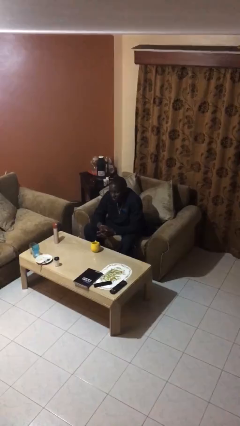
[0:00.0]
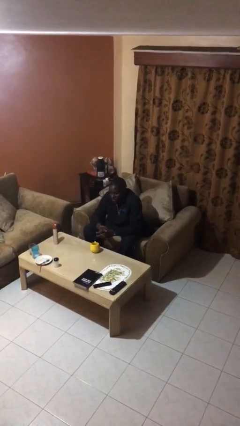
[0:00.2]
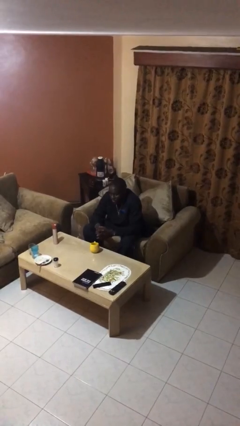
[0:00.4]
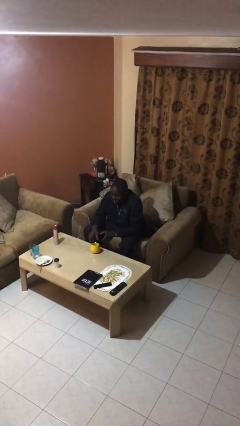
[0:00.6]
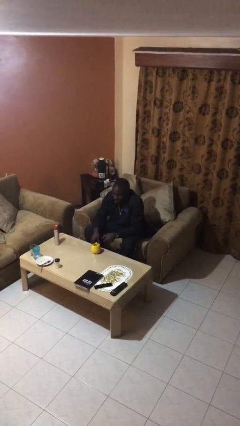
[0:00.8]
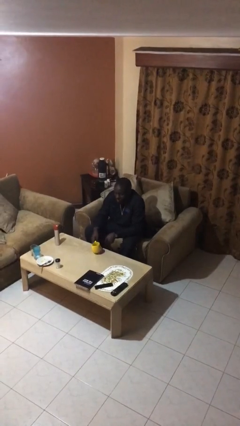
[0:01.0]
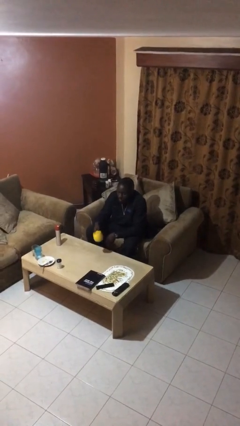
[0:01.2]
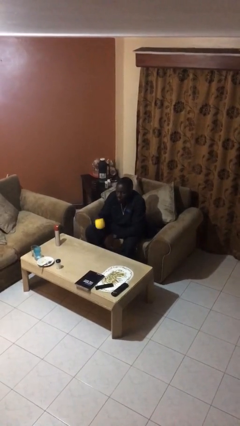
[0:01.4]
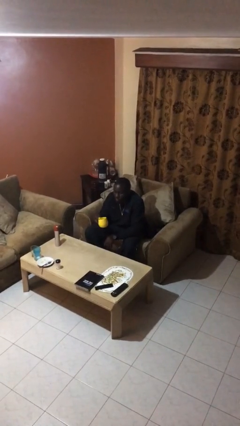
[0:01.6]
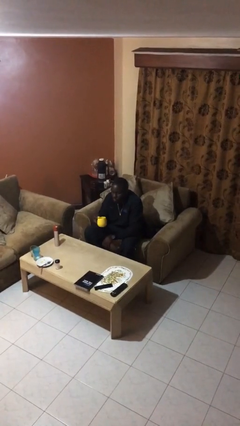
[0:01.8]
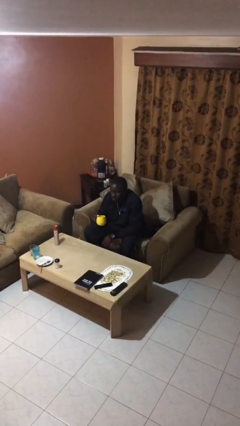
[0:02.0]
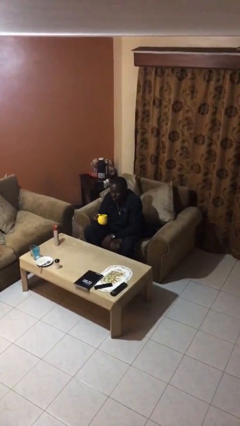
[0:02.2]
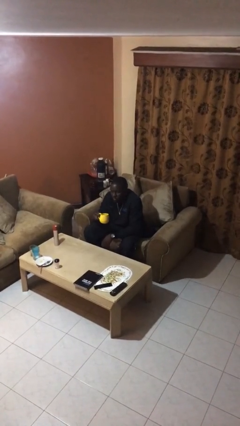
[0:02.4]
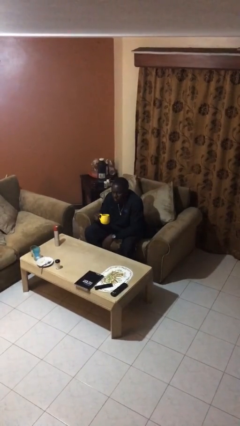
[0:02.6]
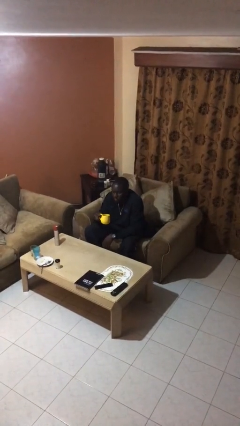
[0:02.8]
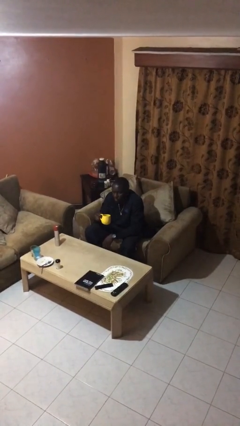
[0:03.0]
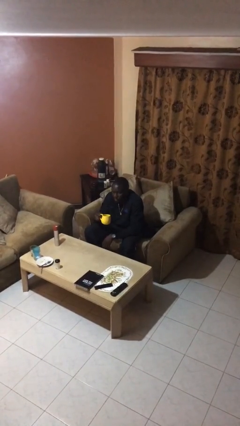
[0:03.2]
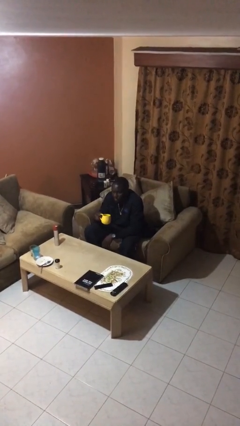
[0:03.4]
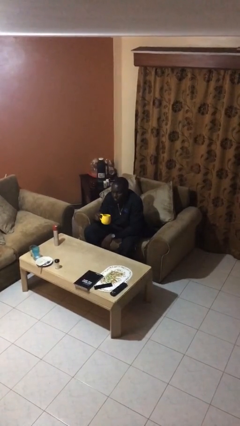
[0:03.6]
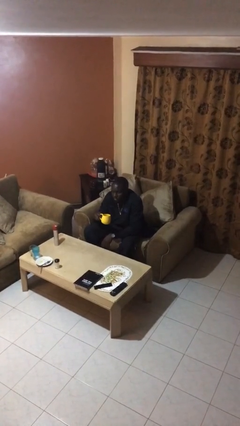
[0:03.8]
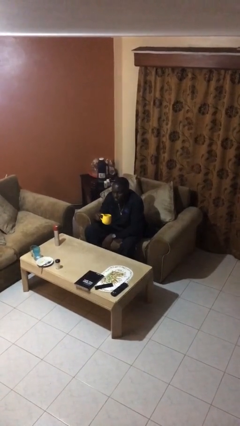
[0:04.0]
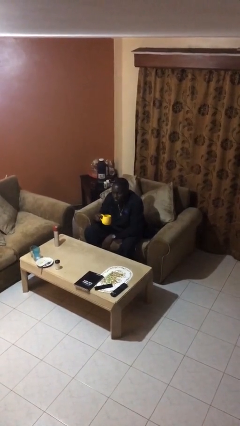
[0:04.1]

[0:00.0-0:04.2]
person picks up object from table

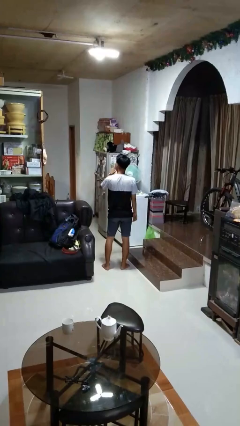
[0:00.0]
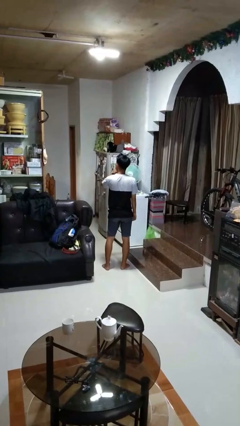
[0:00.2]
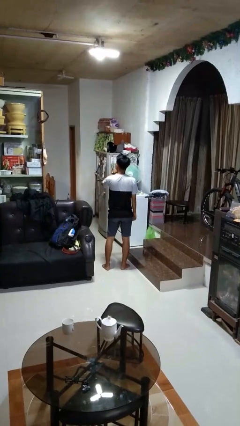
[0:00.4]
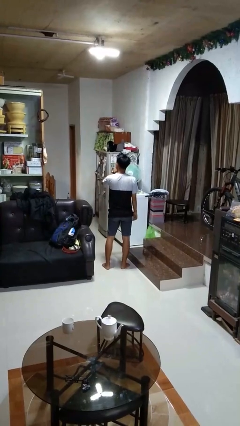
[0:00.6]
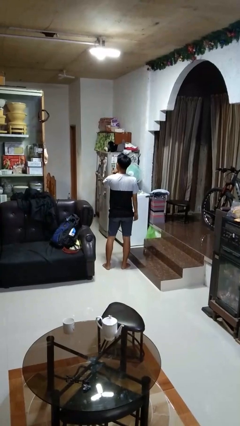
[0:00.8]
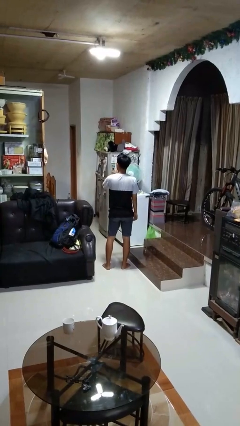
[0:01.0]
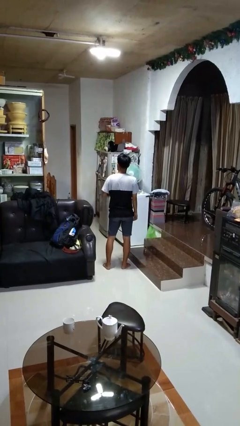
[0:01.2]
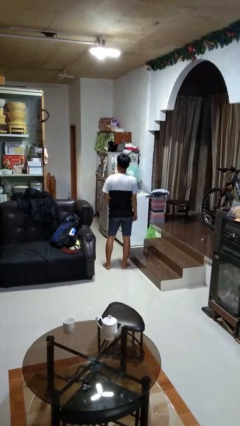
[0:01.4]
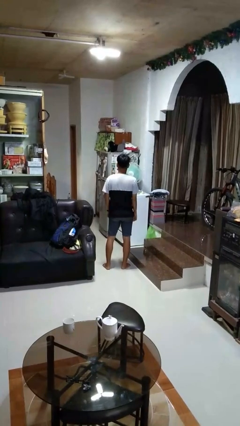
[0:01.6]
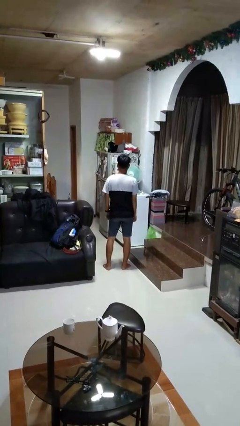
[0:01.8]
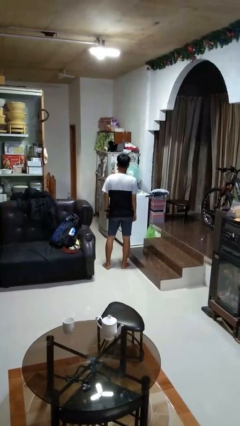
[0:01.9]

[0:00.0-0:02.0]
person gestures be quiet

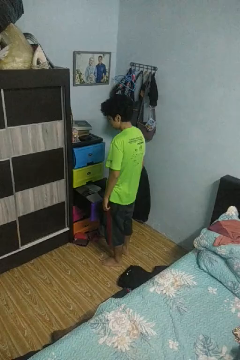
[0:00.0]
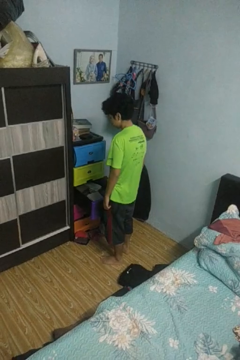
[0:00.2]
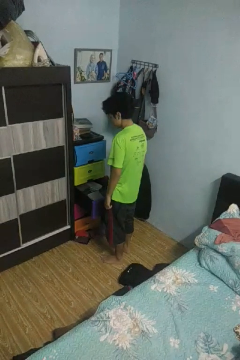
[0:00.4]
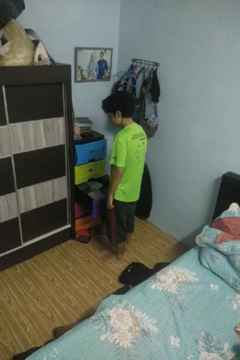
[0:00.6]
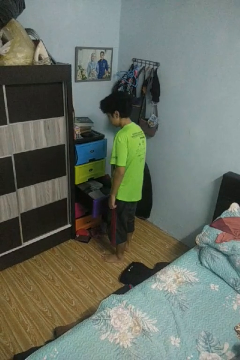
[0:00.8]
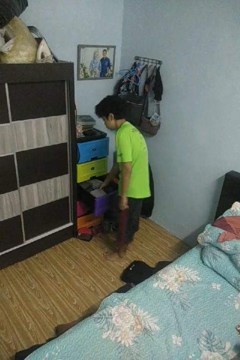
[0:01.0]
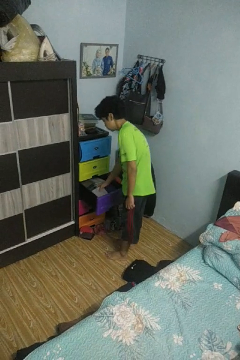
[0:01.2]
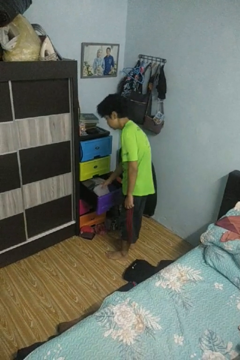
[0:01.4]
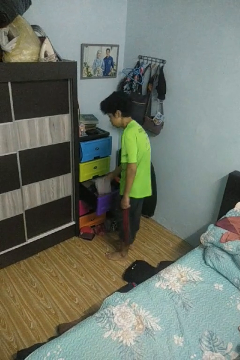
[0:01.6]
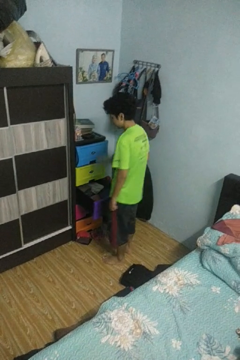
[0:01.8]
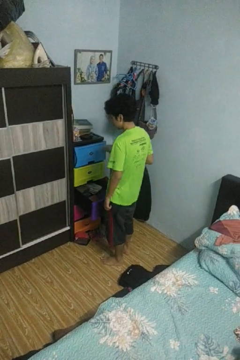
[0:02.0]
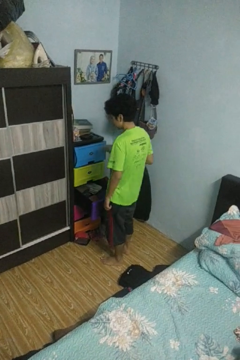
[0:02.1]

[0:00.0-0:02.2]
person takes clothes from dresser

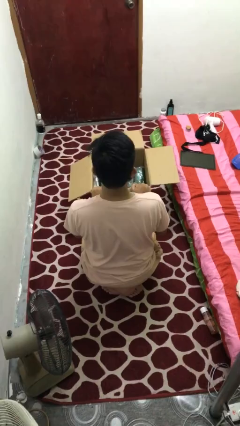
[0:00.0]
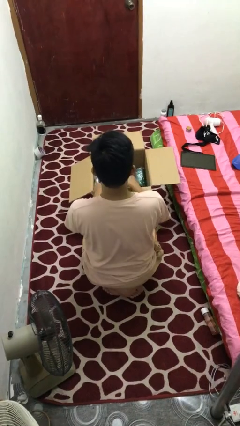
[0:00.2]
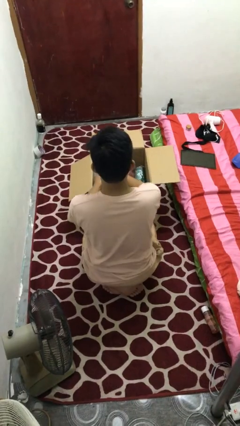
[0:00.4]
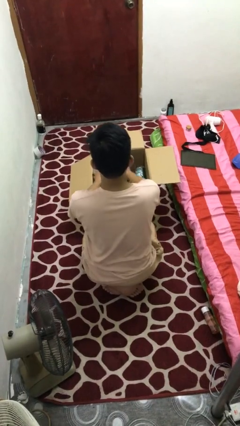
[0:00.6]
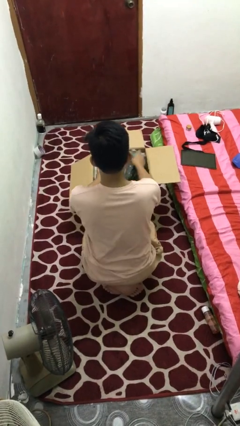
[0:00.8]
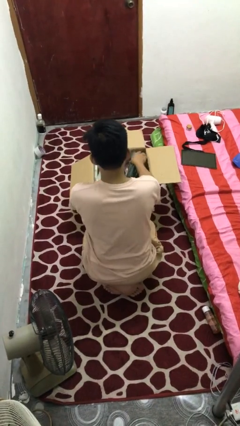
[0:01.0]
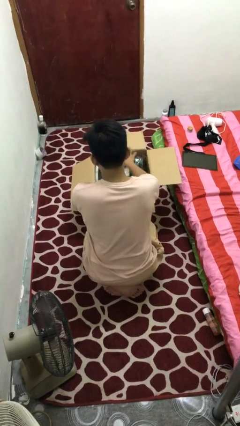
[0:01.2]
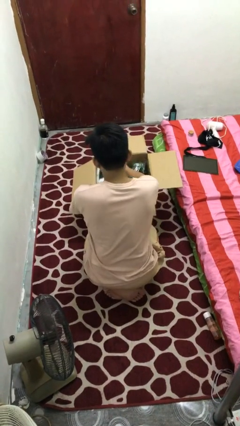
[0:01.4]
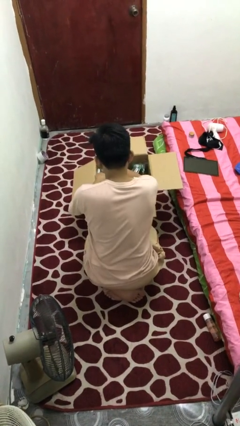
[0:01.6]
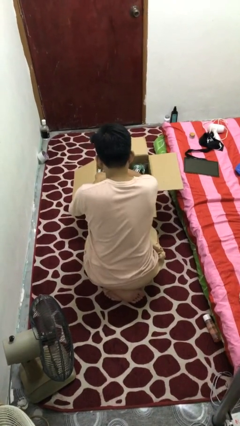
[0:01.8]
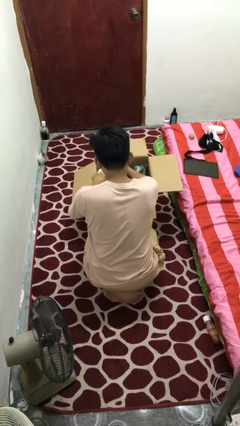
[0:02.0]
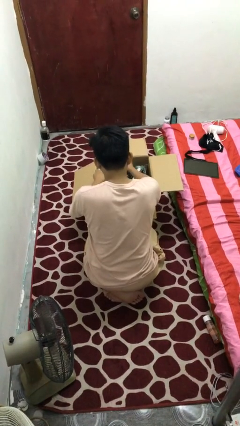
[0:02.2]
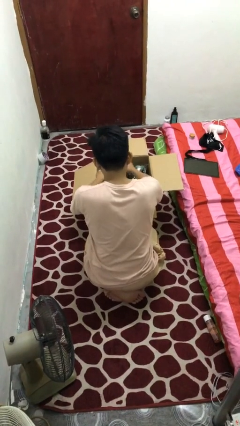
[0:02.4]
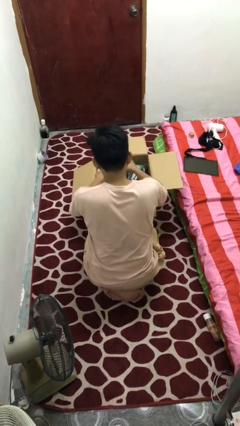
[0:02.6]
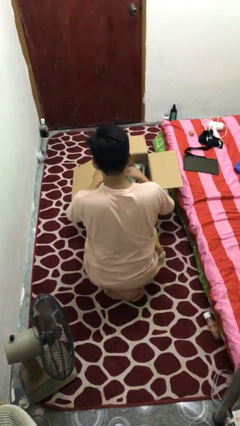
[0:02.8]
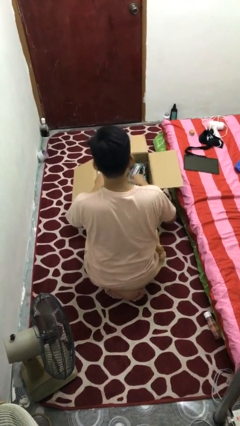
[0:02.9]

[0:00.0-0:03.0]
person searches in box

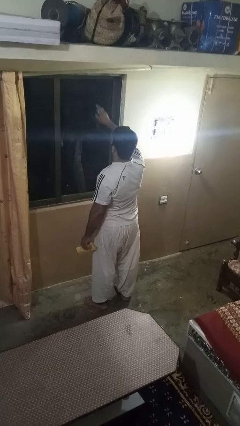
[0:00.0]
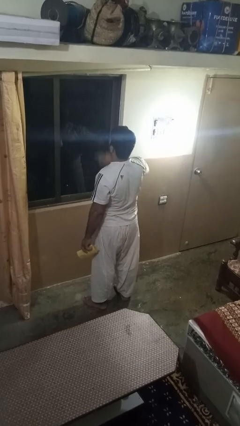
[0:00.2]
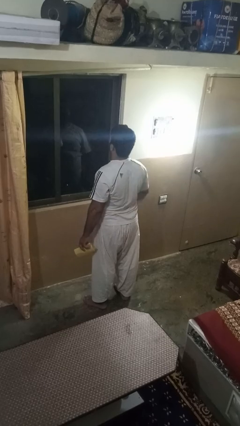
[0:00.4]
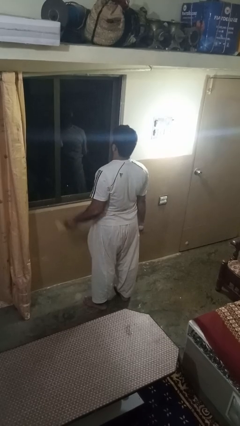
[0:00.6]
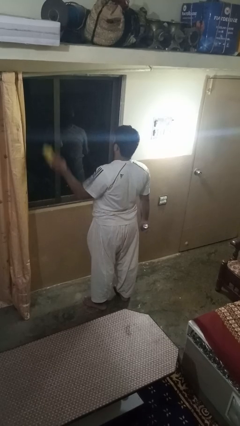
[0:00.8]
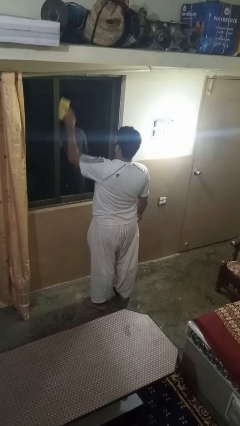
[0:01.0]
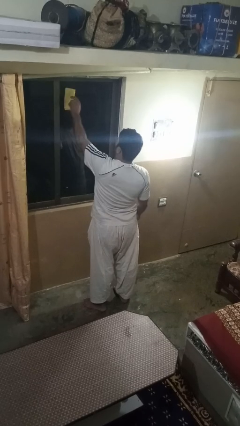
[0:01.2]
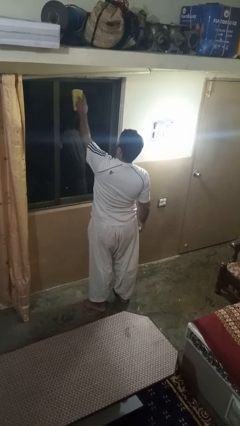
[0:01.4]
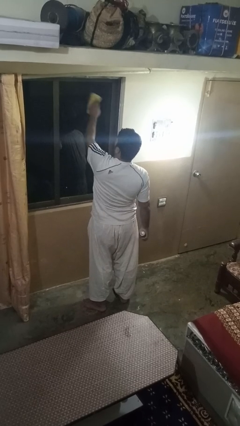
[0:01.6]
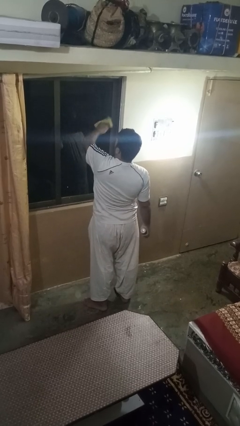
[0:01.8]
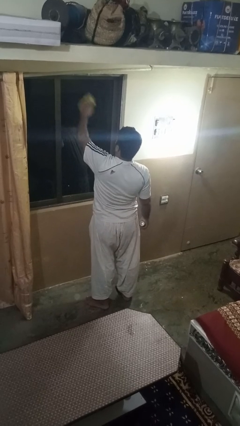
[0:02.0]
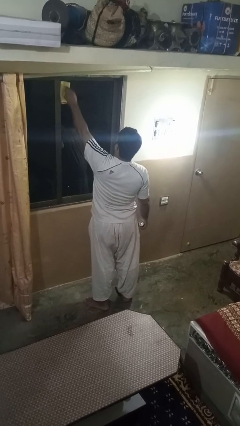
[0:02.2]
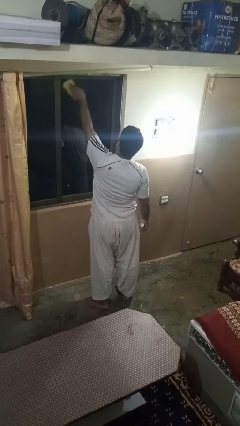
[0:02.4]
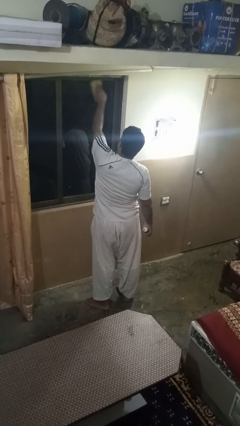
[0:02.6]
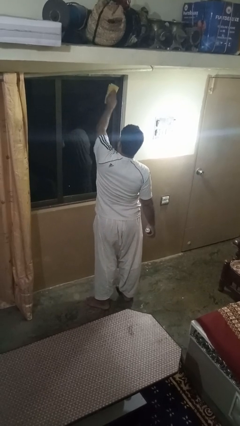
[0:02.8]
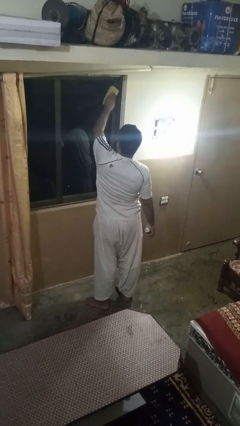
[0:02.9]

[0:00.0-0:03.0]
person washes window

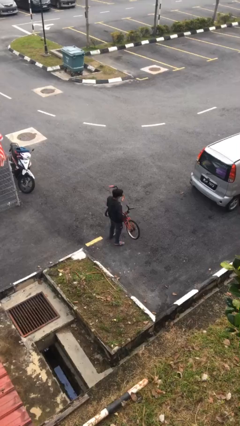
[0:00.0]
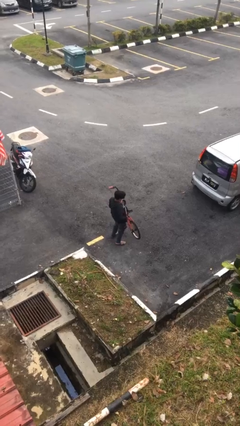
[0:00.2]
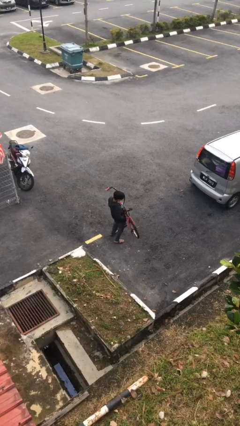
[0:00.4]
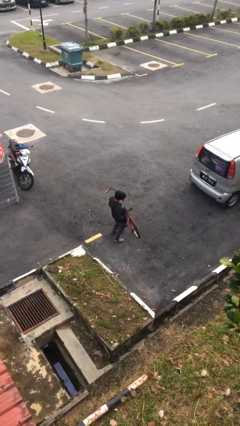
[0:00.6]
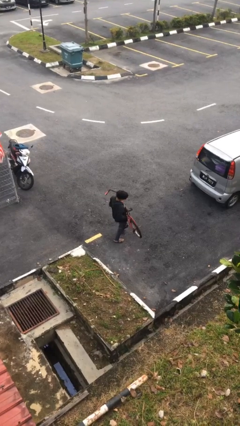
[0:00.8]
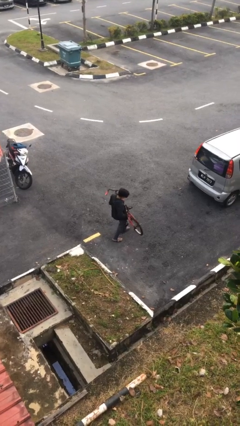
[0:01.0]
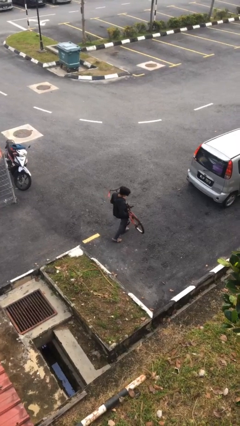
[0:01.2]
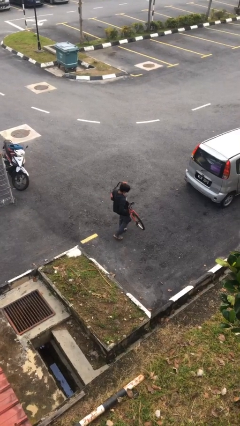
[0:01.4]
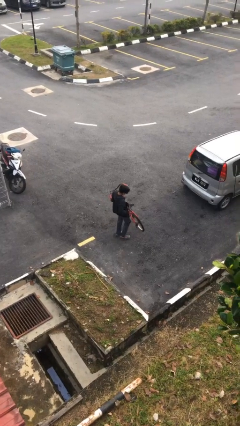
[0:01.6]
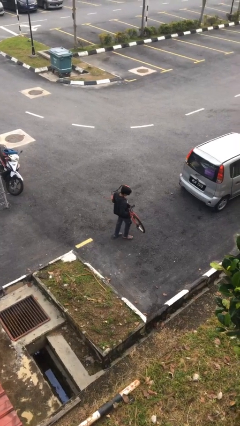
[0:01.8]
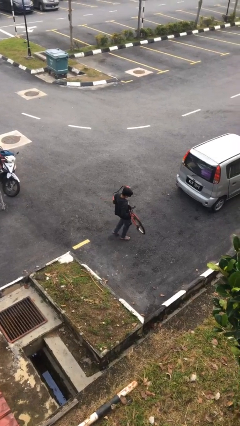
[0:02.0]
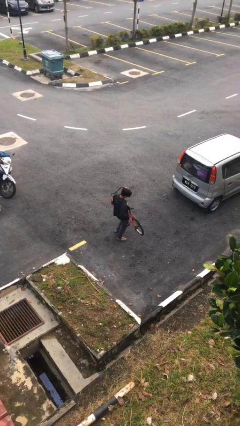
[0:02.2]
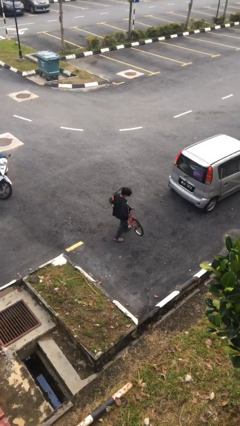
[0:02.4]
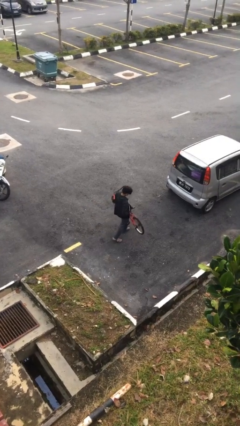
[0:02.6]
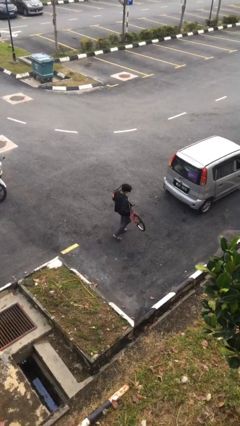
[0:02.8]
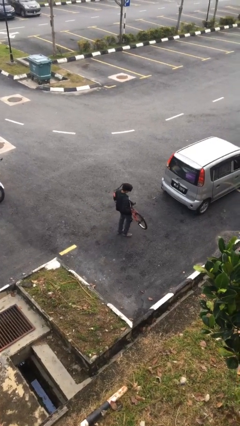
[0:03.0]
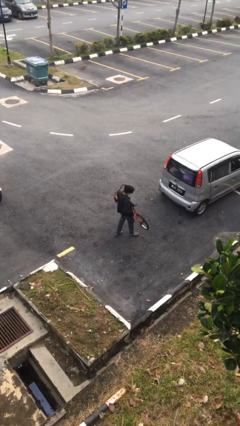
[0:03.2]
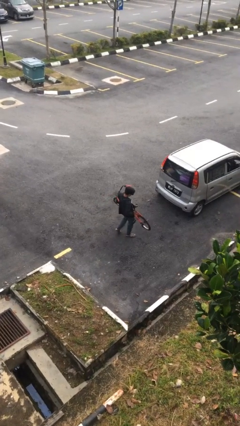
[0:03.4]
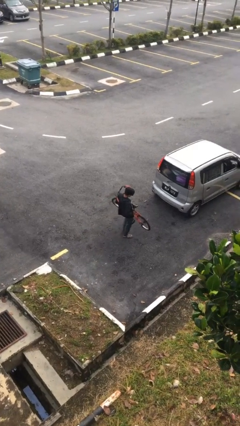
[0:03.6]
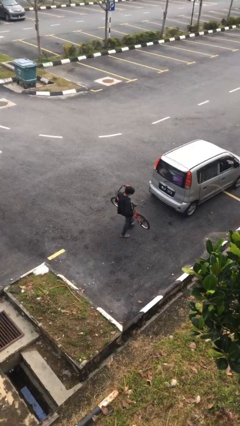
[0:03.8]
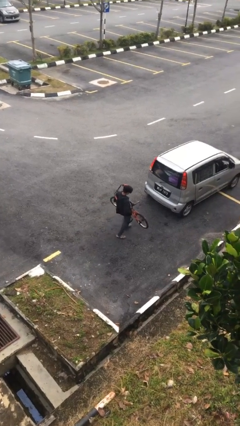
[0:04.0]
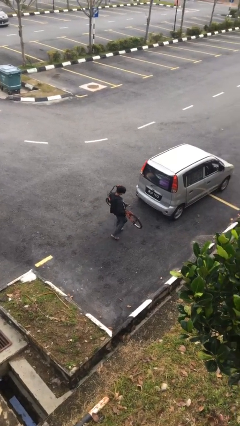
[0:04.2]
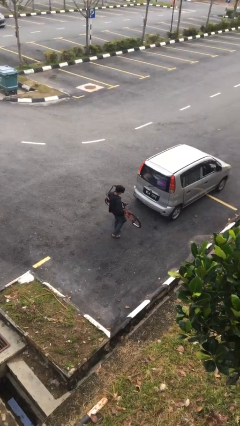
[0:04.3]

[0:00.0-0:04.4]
person carries heavy object
